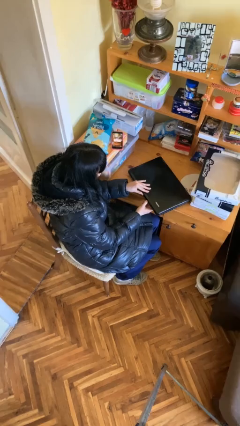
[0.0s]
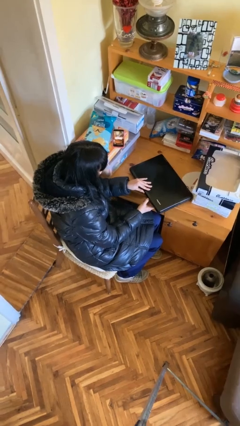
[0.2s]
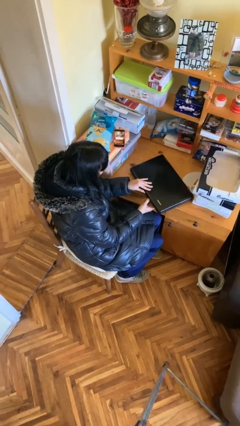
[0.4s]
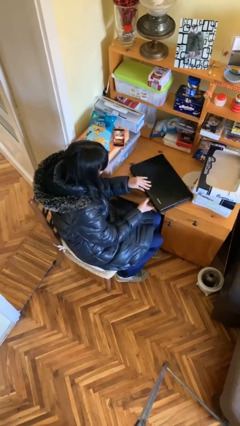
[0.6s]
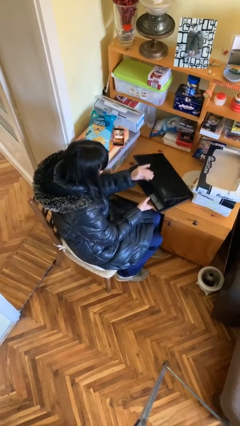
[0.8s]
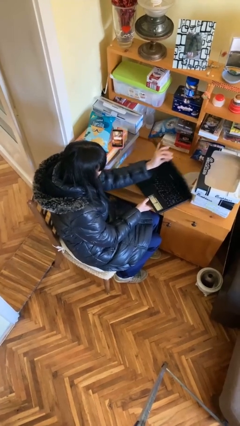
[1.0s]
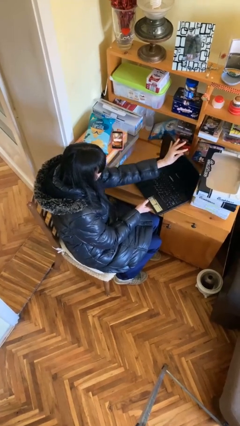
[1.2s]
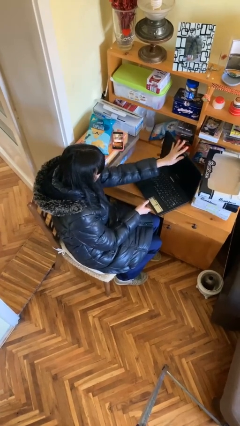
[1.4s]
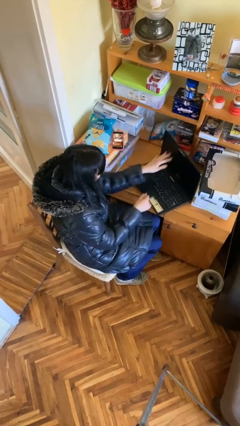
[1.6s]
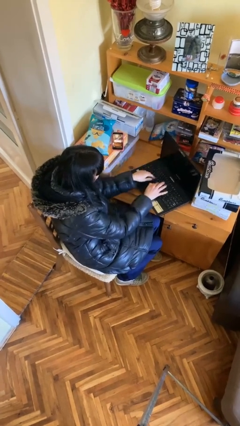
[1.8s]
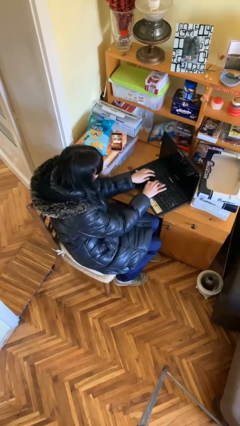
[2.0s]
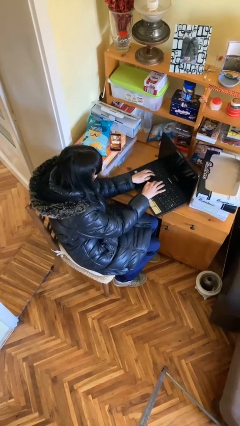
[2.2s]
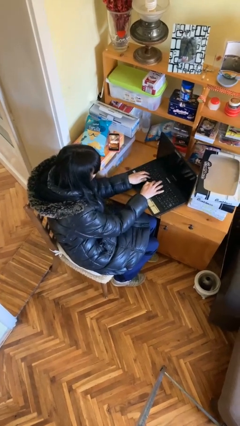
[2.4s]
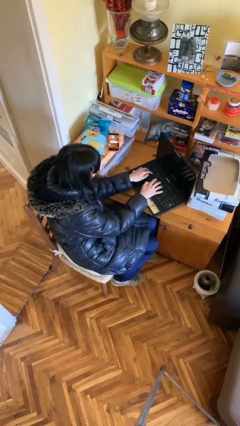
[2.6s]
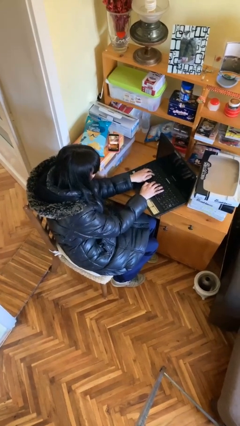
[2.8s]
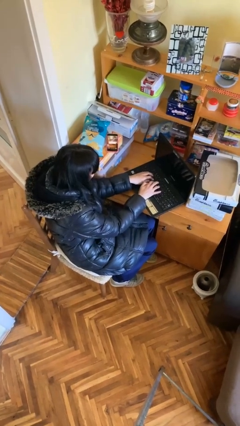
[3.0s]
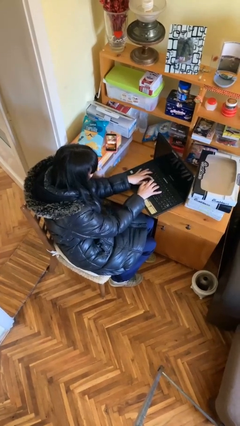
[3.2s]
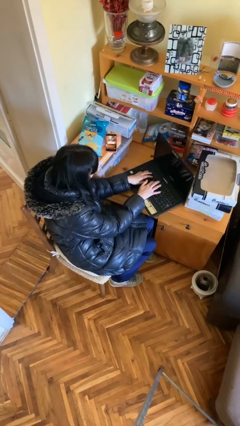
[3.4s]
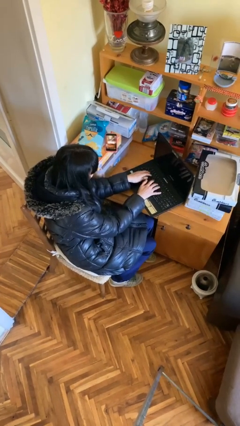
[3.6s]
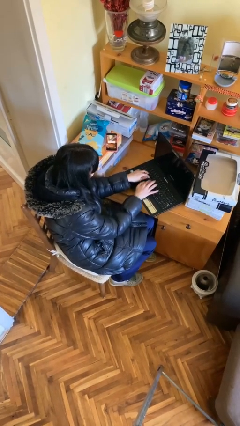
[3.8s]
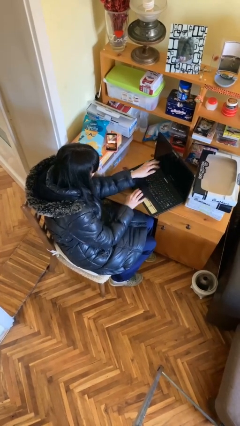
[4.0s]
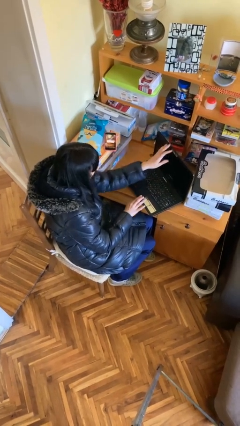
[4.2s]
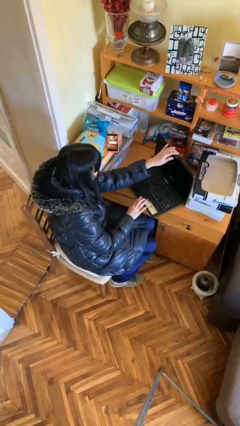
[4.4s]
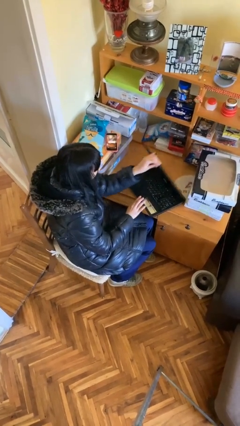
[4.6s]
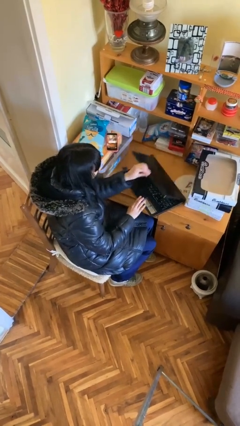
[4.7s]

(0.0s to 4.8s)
person interacts with laptop

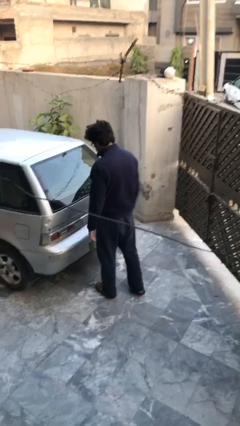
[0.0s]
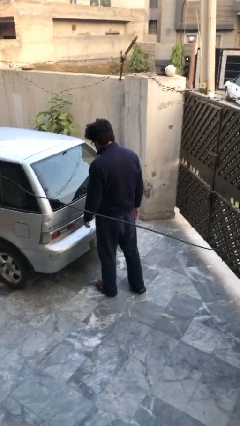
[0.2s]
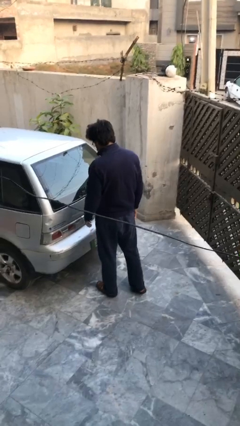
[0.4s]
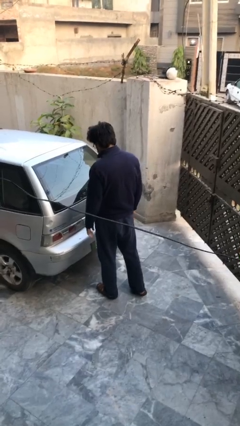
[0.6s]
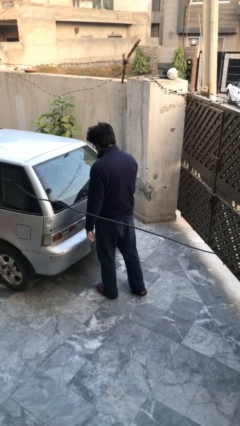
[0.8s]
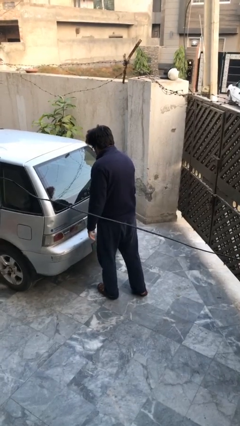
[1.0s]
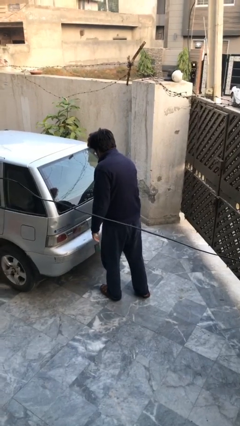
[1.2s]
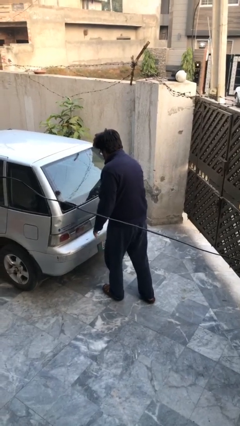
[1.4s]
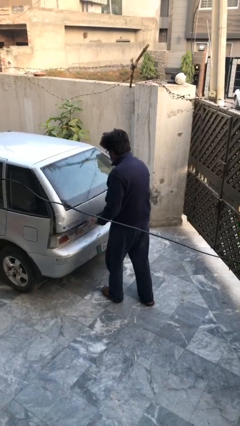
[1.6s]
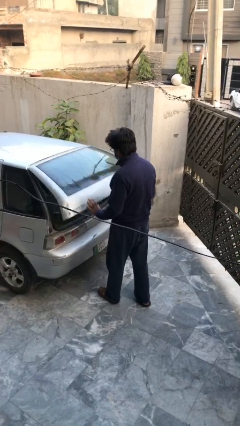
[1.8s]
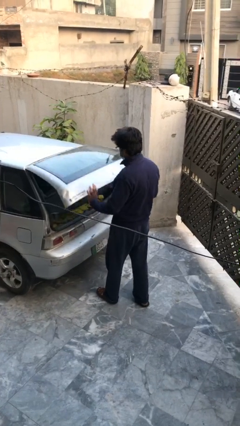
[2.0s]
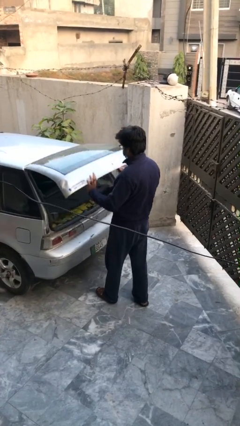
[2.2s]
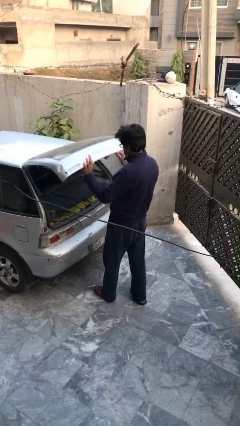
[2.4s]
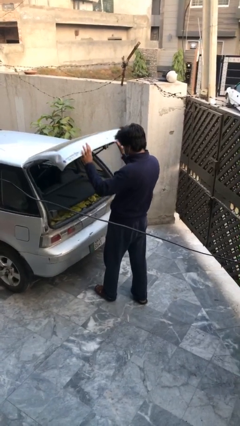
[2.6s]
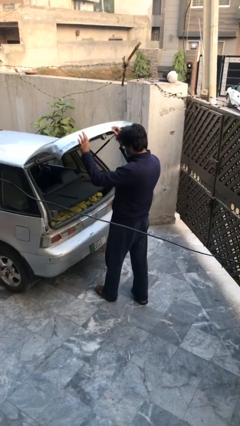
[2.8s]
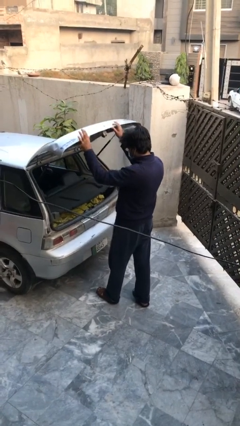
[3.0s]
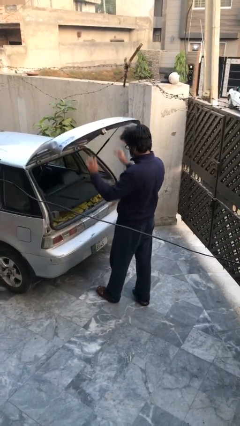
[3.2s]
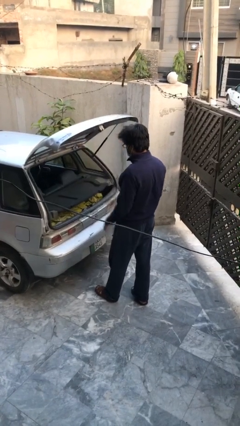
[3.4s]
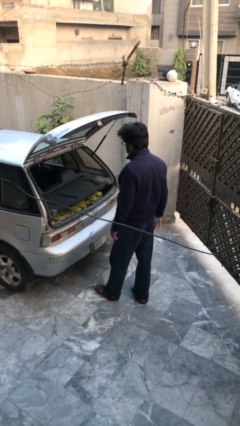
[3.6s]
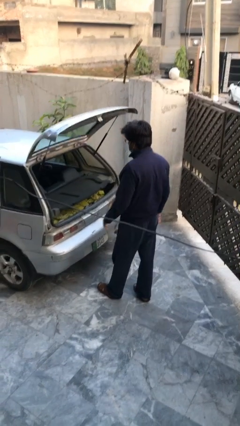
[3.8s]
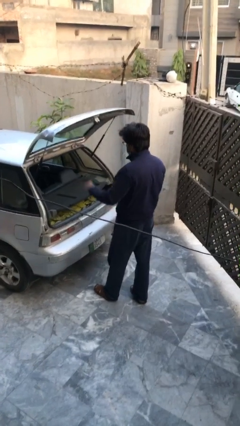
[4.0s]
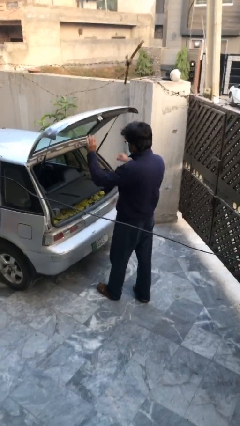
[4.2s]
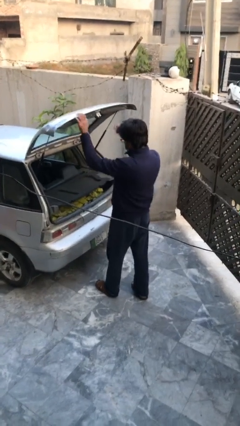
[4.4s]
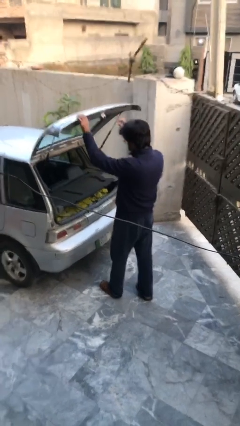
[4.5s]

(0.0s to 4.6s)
person opens car trunk

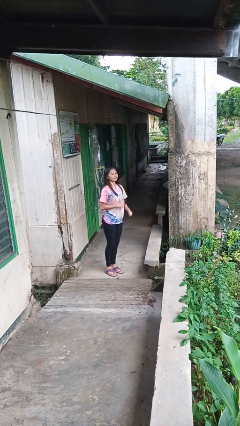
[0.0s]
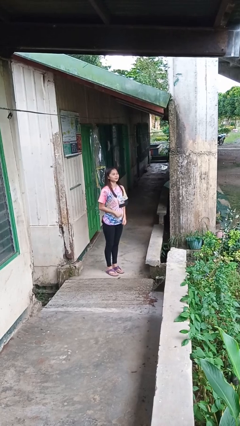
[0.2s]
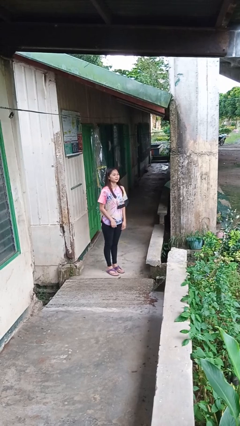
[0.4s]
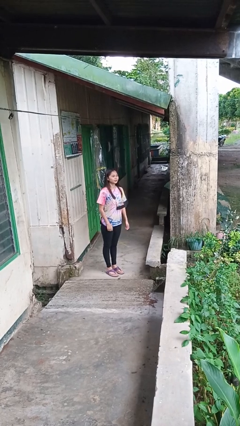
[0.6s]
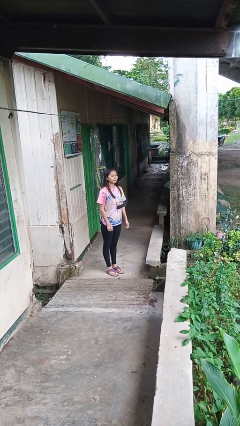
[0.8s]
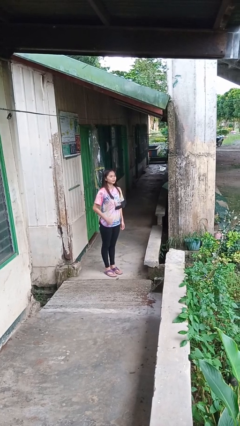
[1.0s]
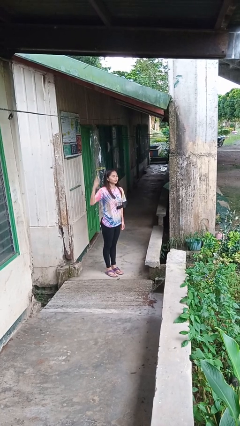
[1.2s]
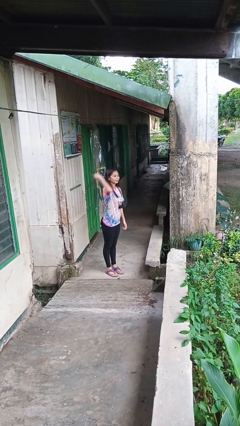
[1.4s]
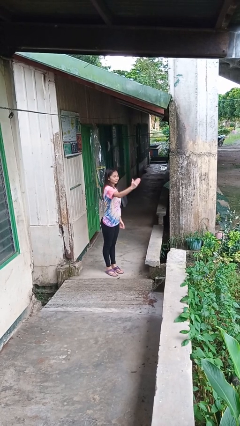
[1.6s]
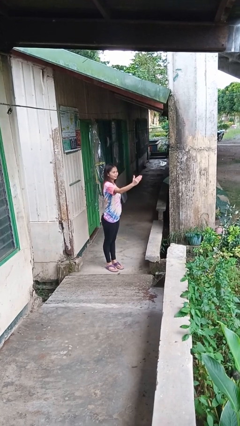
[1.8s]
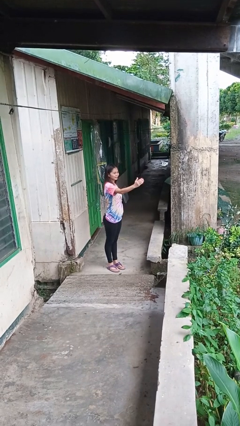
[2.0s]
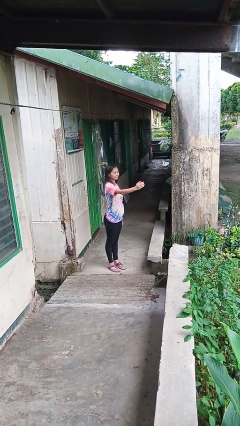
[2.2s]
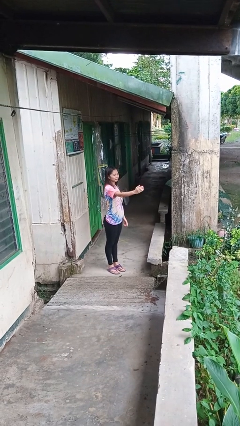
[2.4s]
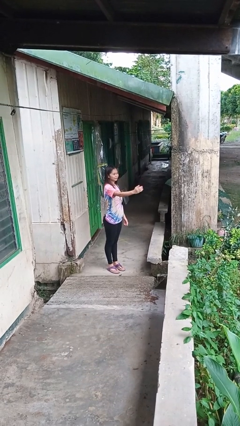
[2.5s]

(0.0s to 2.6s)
person karate chop

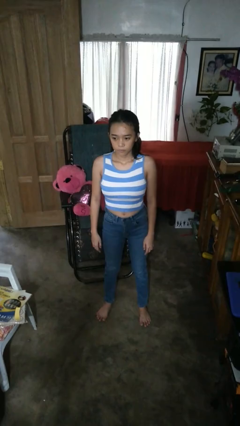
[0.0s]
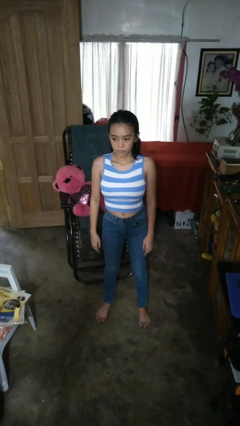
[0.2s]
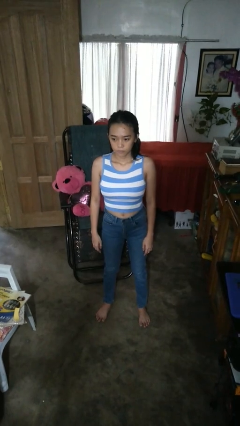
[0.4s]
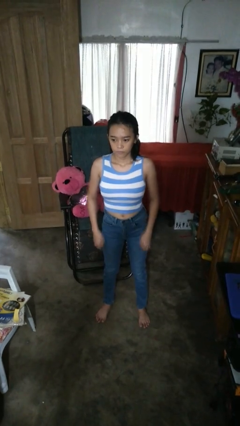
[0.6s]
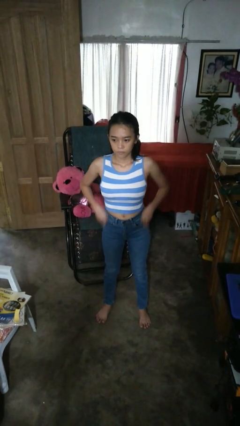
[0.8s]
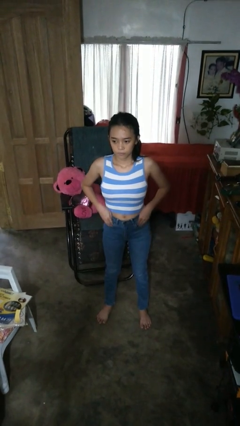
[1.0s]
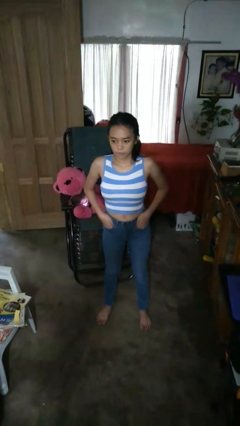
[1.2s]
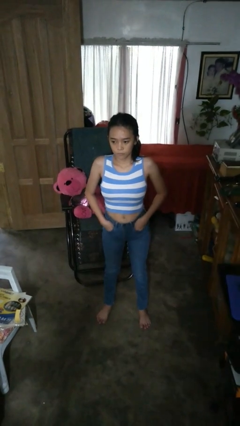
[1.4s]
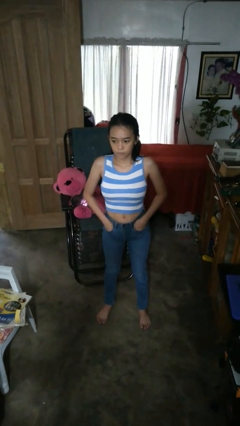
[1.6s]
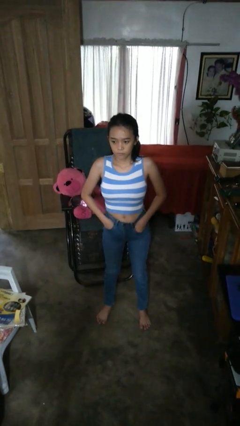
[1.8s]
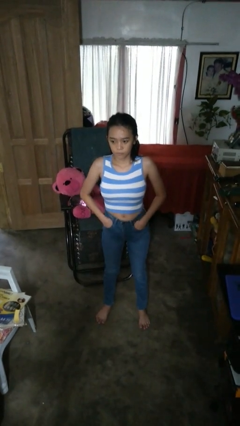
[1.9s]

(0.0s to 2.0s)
person puts hands in back pockets

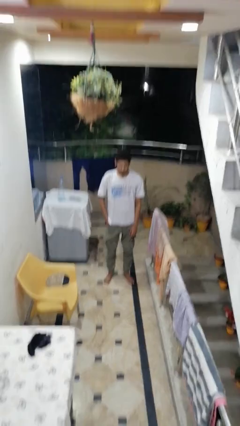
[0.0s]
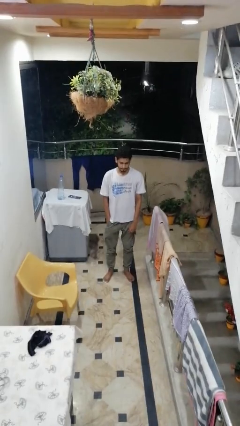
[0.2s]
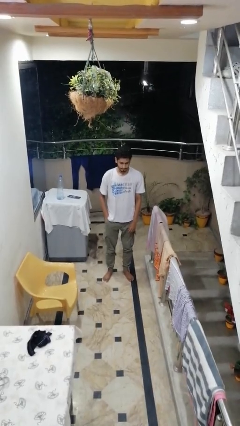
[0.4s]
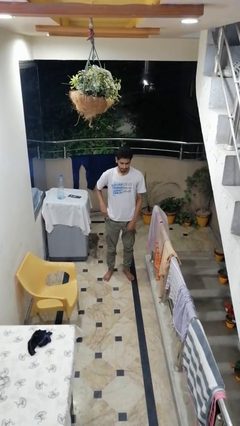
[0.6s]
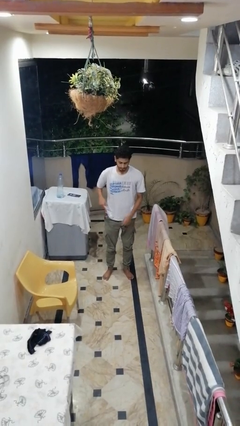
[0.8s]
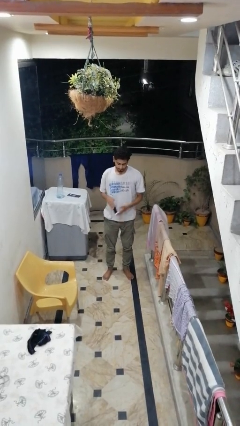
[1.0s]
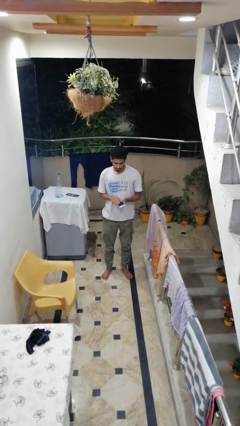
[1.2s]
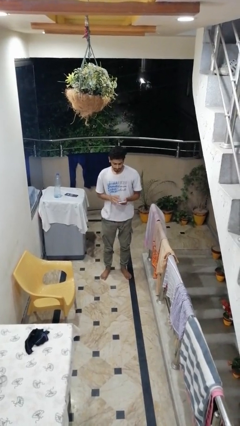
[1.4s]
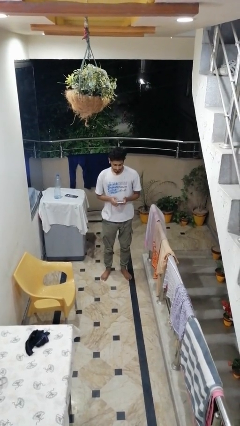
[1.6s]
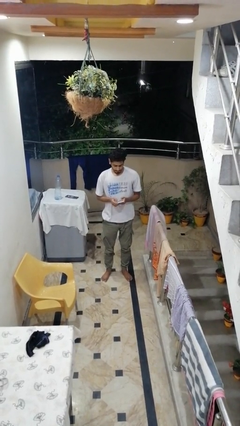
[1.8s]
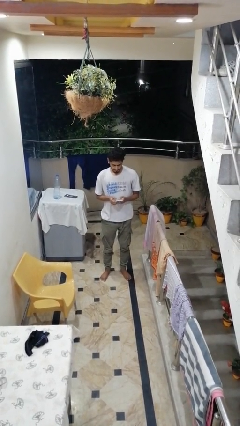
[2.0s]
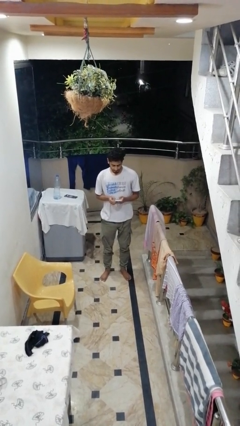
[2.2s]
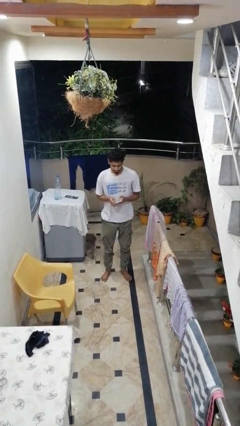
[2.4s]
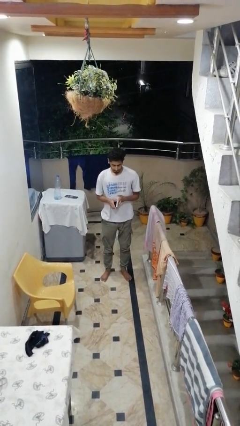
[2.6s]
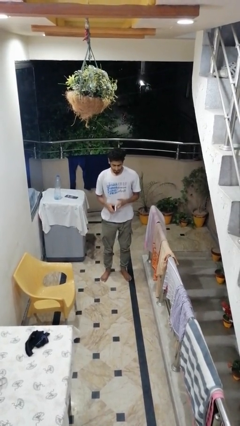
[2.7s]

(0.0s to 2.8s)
person takes phone from pocket

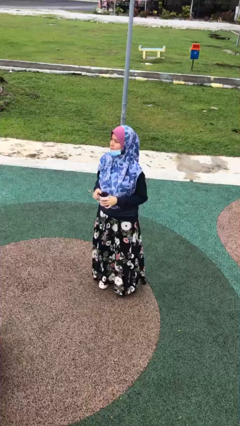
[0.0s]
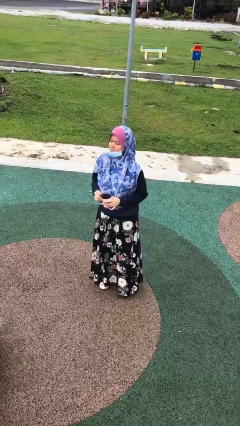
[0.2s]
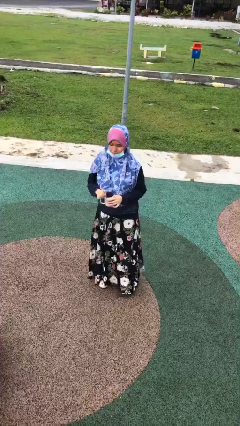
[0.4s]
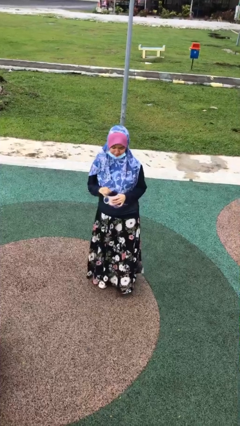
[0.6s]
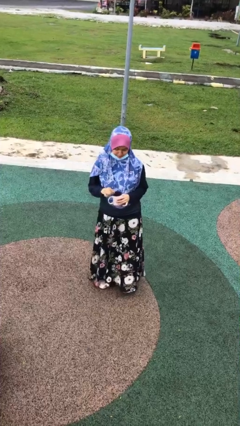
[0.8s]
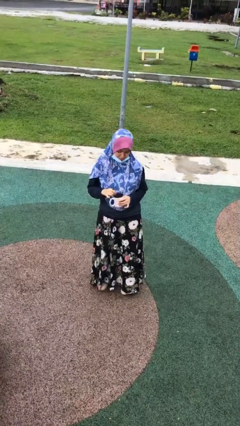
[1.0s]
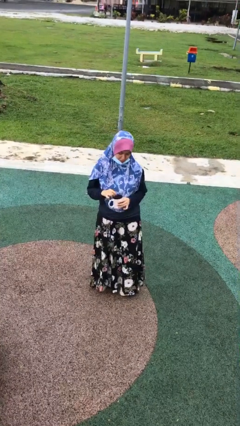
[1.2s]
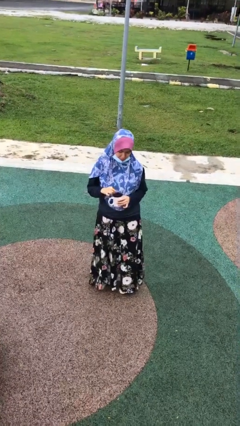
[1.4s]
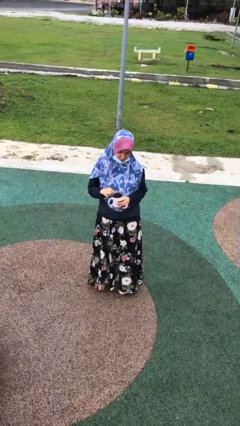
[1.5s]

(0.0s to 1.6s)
person stirs mug
